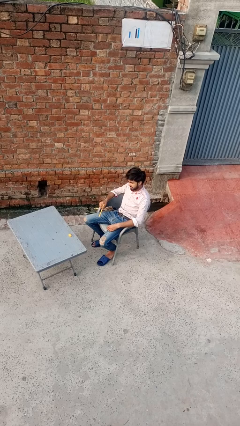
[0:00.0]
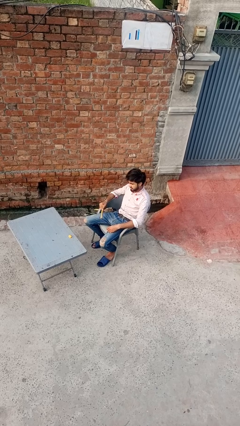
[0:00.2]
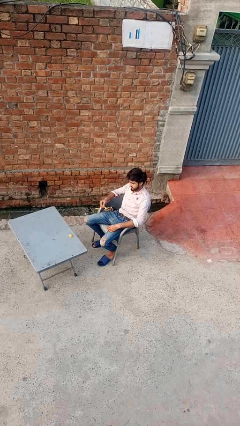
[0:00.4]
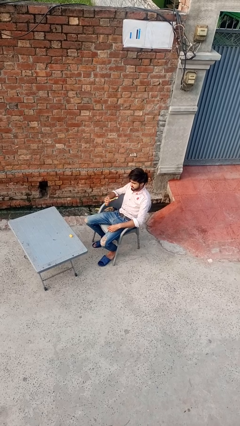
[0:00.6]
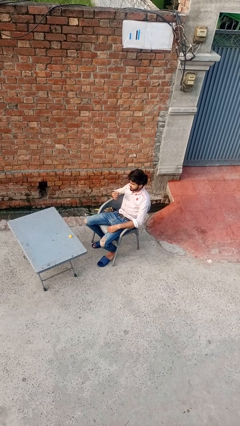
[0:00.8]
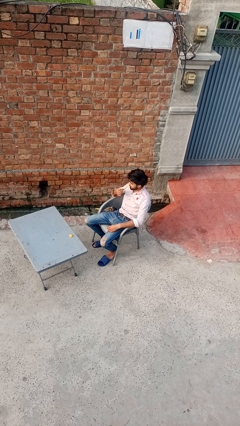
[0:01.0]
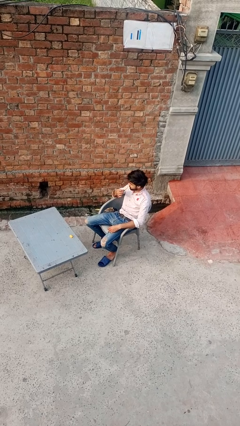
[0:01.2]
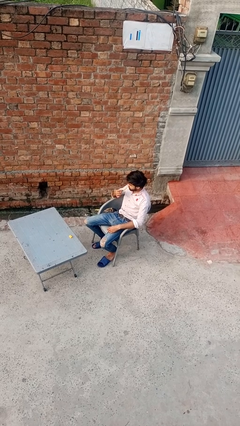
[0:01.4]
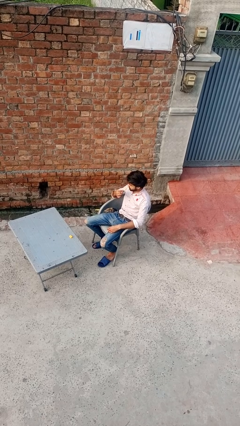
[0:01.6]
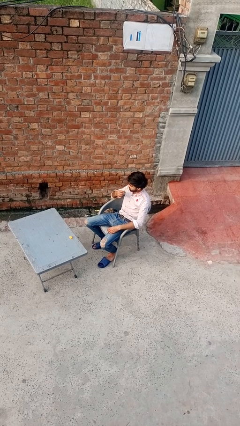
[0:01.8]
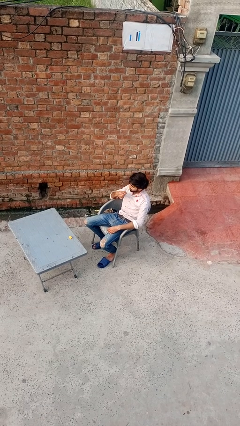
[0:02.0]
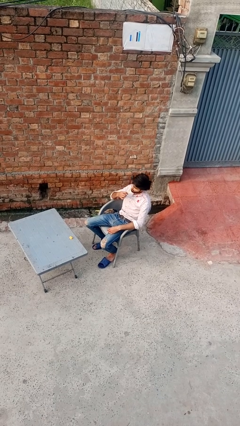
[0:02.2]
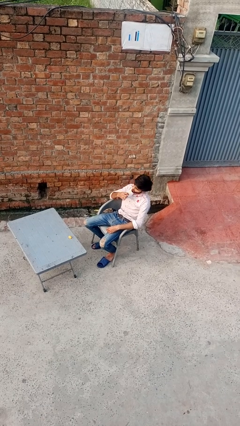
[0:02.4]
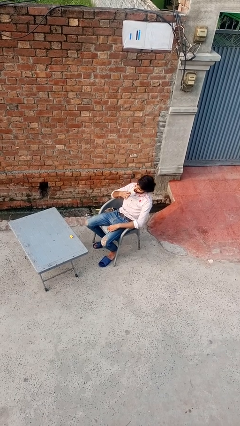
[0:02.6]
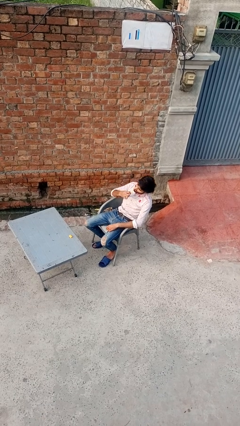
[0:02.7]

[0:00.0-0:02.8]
person brushes teeth

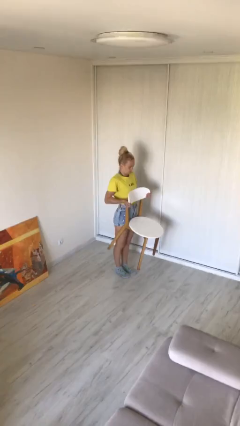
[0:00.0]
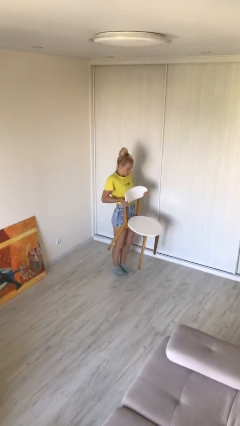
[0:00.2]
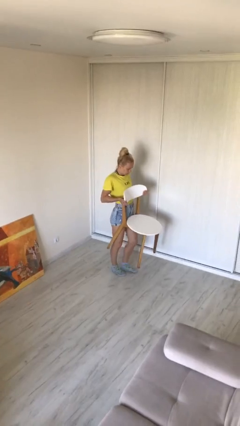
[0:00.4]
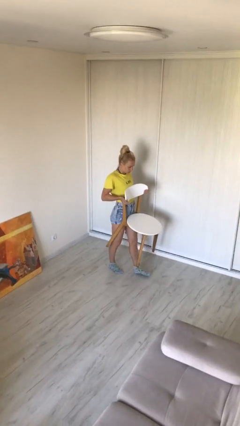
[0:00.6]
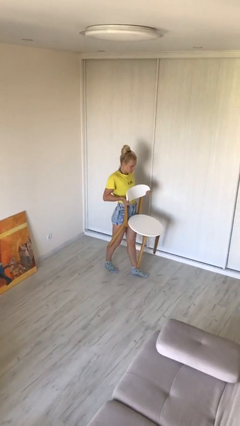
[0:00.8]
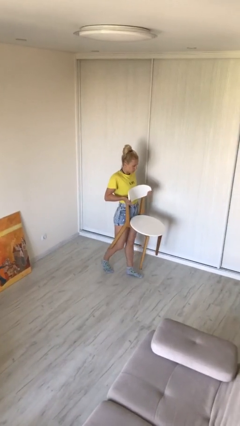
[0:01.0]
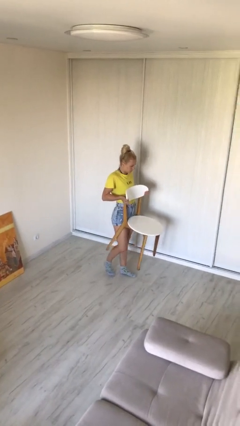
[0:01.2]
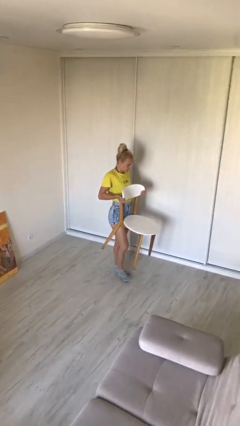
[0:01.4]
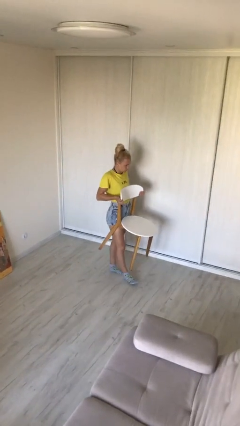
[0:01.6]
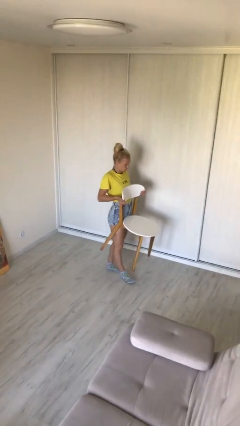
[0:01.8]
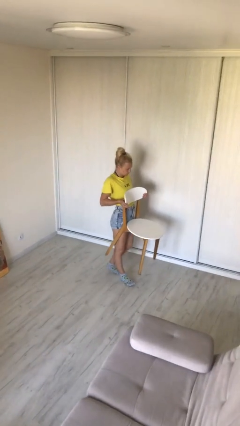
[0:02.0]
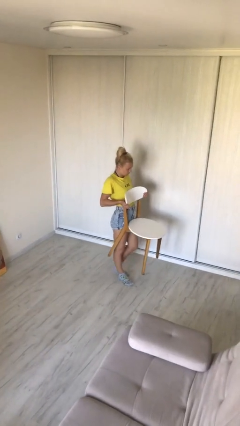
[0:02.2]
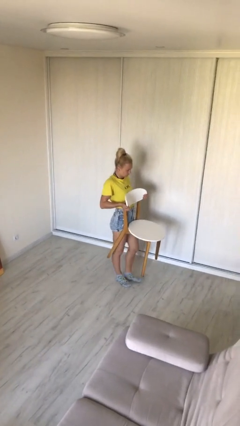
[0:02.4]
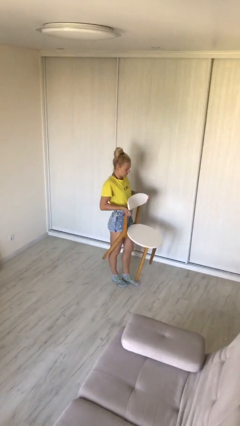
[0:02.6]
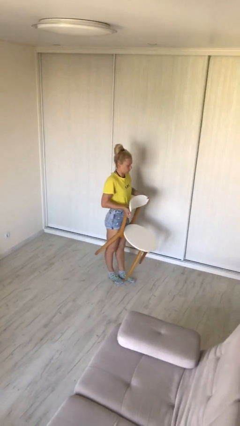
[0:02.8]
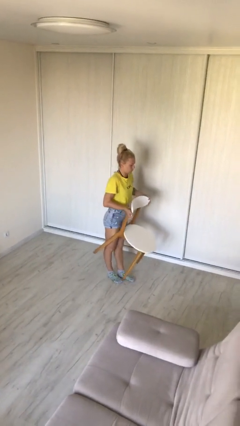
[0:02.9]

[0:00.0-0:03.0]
person carries heavy object

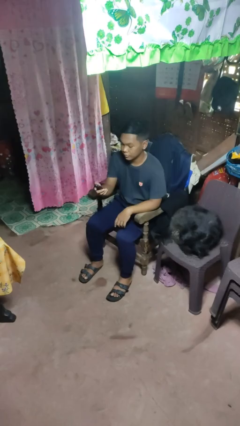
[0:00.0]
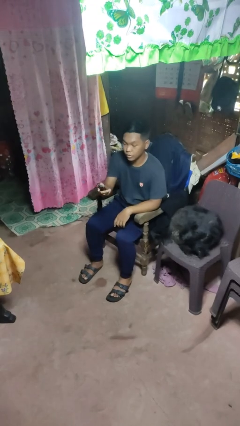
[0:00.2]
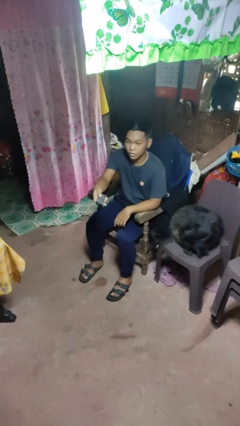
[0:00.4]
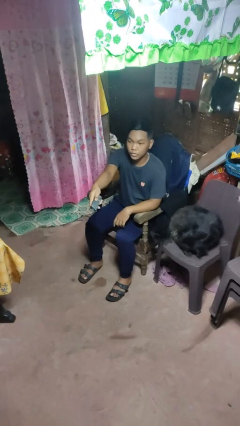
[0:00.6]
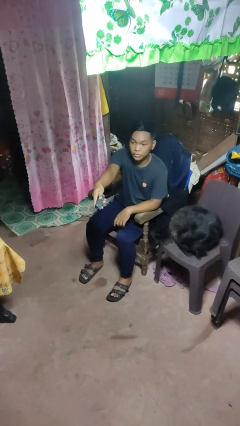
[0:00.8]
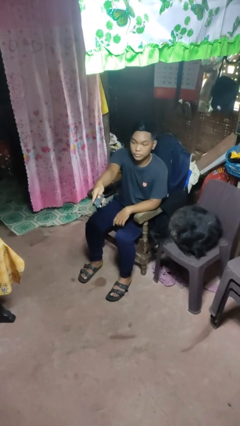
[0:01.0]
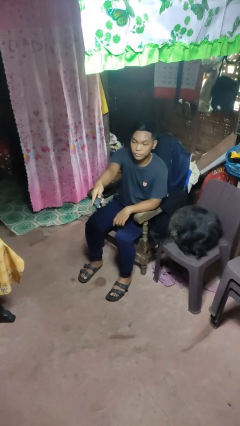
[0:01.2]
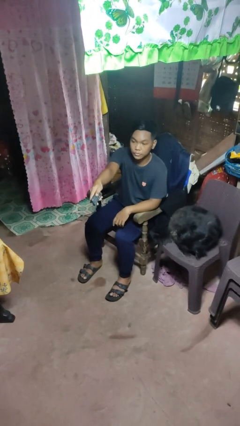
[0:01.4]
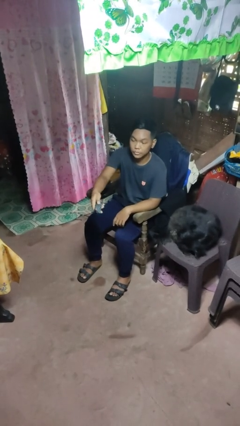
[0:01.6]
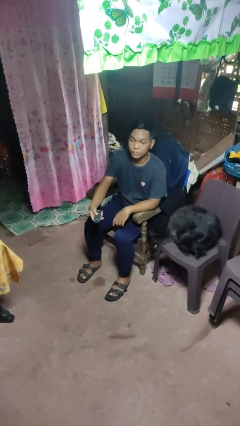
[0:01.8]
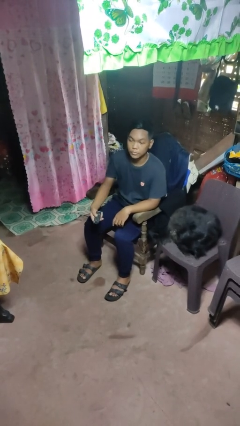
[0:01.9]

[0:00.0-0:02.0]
person uses television remote

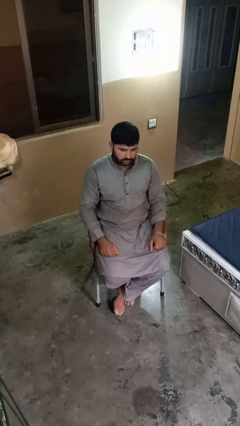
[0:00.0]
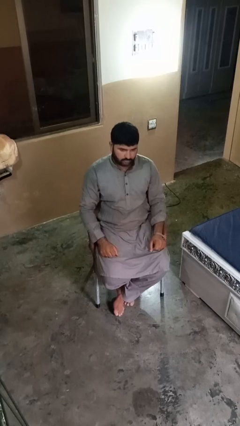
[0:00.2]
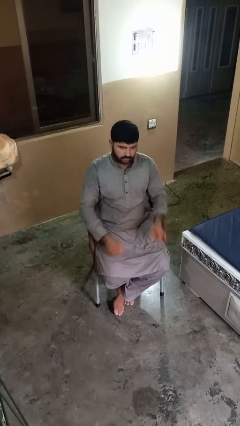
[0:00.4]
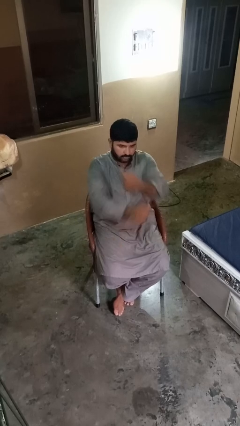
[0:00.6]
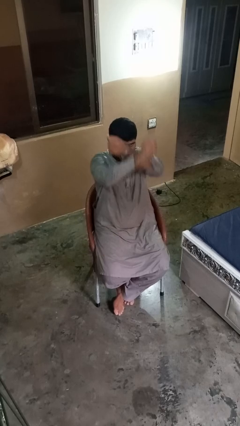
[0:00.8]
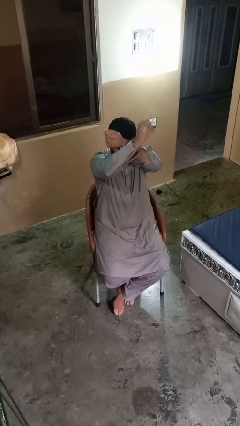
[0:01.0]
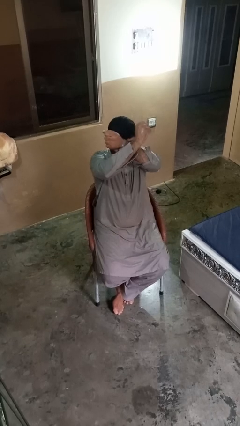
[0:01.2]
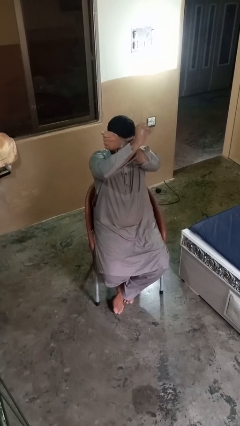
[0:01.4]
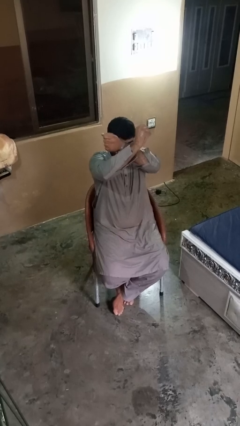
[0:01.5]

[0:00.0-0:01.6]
person gestures arms x

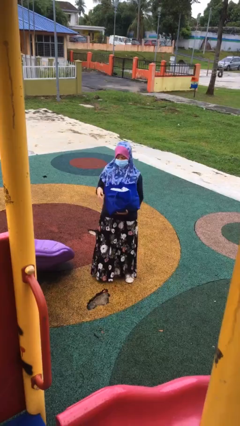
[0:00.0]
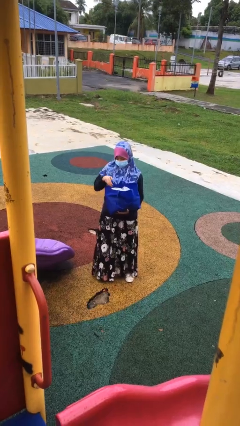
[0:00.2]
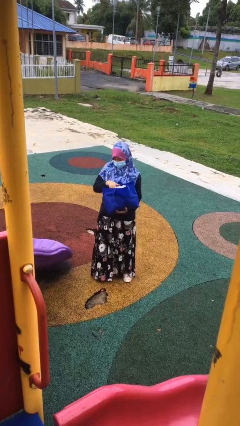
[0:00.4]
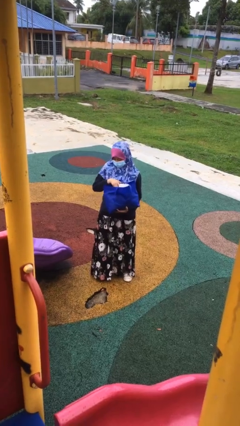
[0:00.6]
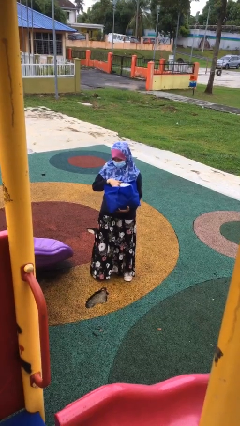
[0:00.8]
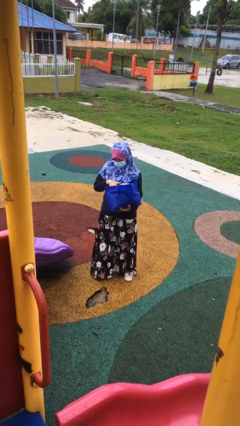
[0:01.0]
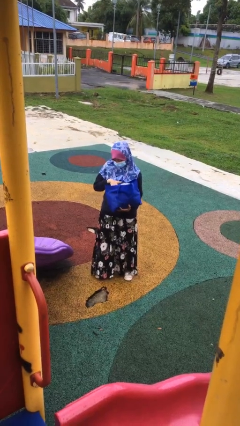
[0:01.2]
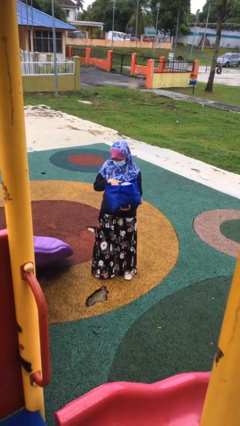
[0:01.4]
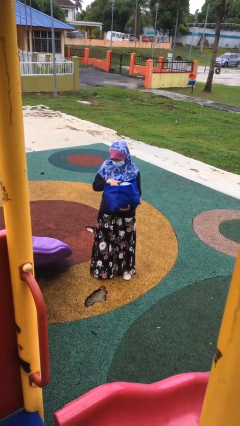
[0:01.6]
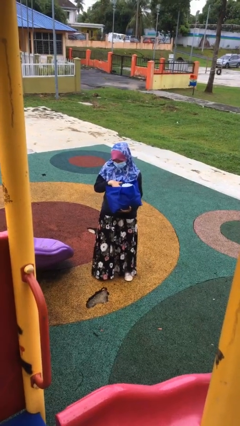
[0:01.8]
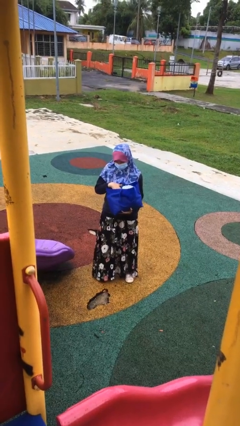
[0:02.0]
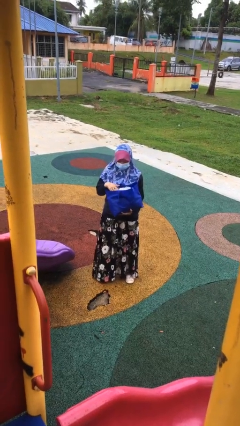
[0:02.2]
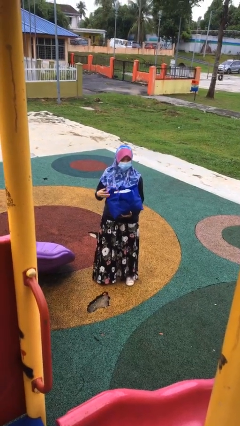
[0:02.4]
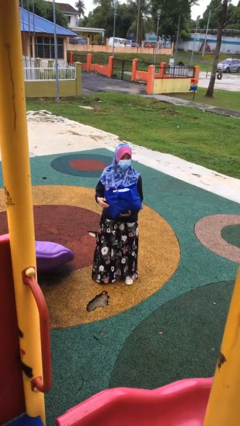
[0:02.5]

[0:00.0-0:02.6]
person searches in bag

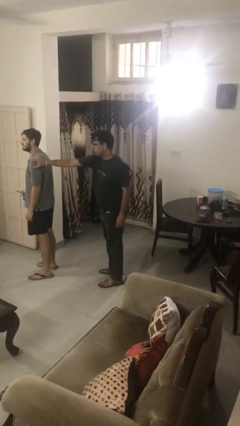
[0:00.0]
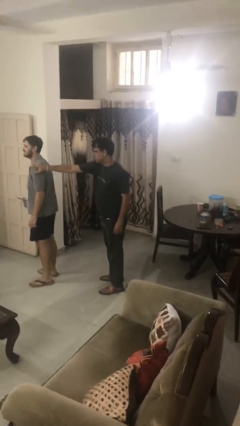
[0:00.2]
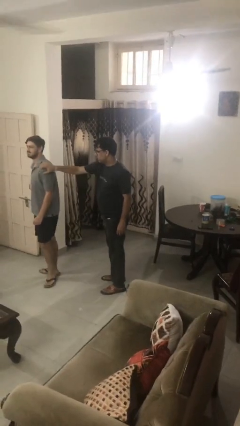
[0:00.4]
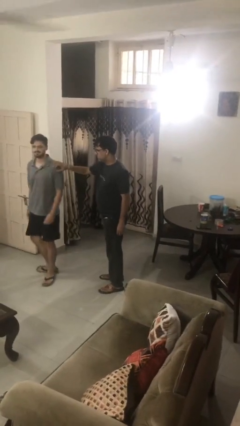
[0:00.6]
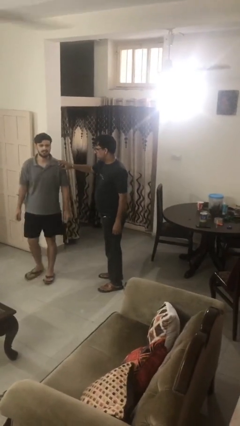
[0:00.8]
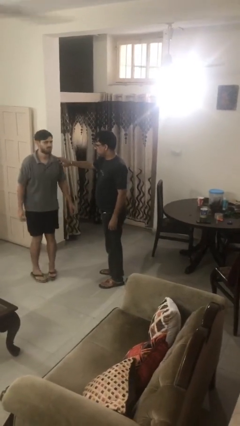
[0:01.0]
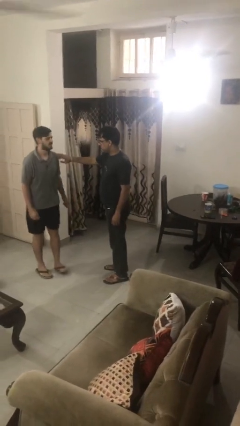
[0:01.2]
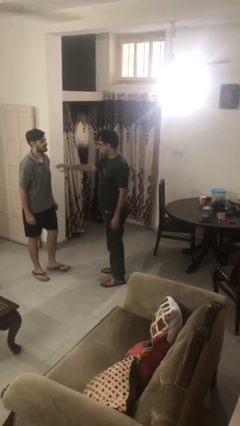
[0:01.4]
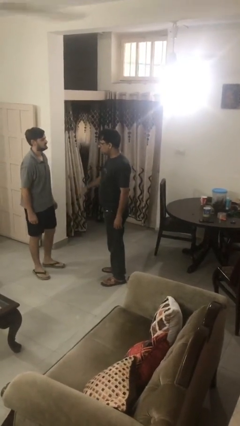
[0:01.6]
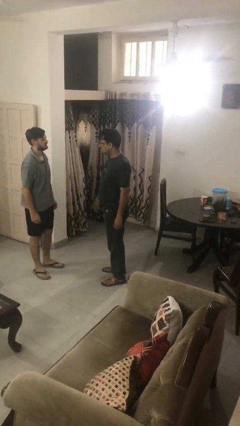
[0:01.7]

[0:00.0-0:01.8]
person spins person around

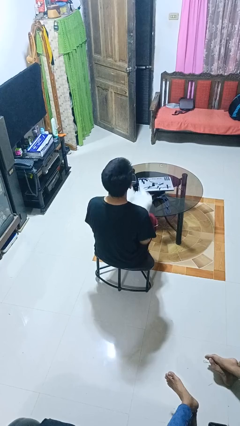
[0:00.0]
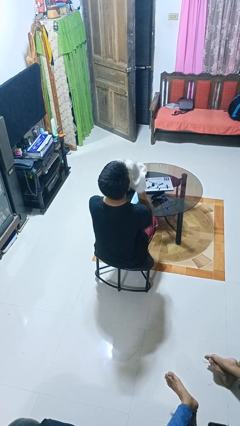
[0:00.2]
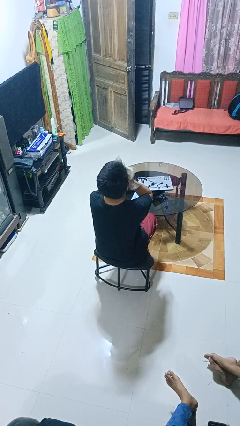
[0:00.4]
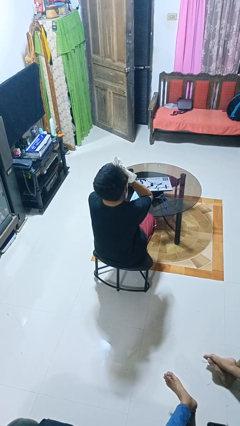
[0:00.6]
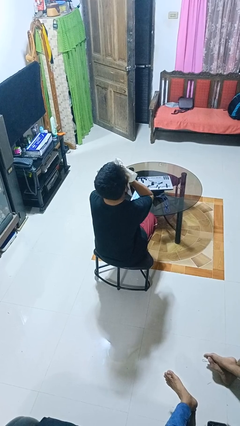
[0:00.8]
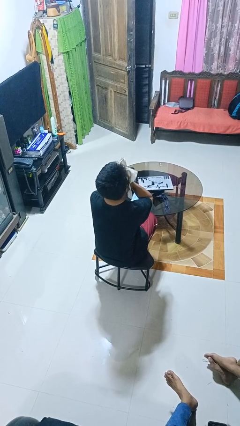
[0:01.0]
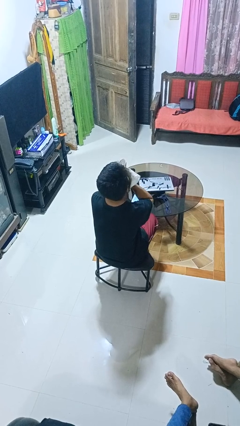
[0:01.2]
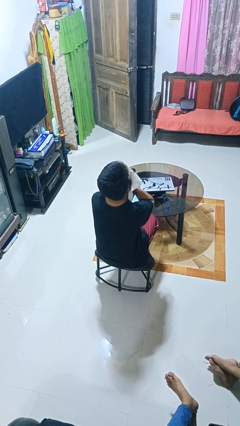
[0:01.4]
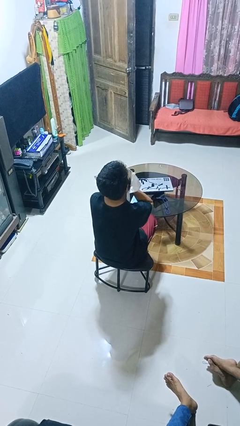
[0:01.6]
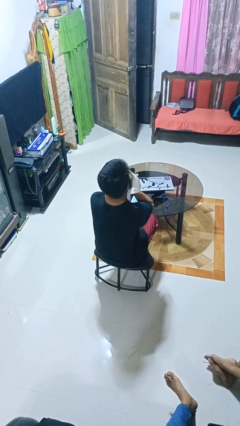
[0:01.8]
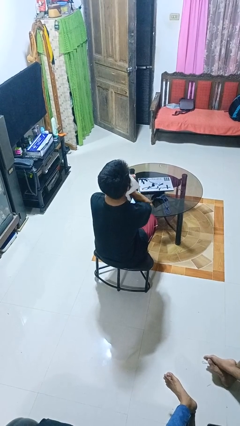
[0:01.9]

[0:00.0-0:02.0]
person wipes mouth with napkin

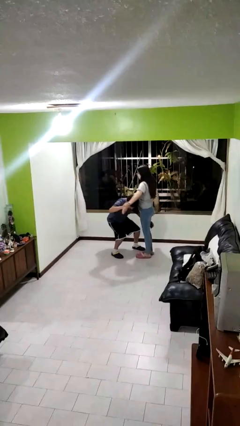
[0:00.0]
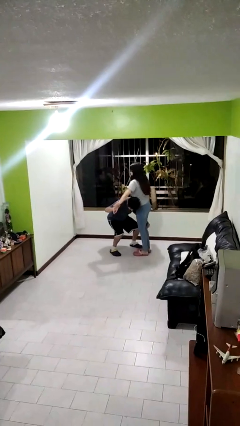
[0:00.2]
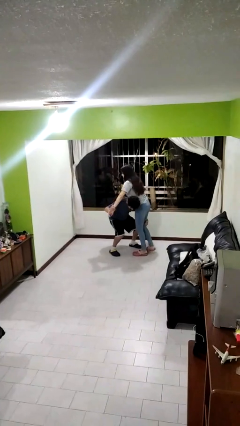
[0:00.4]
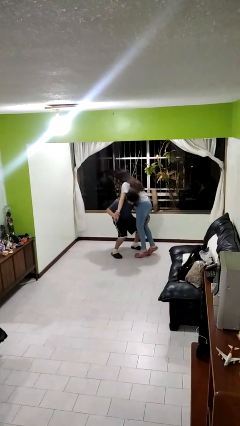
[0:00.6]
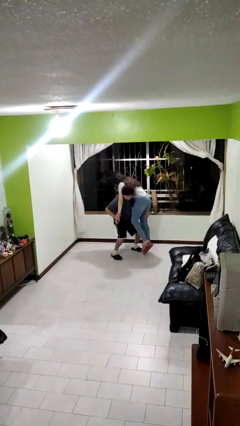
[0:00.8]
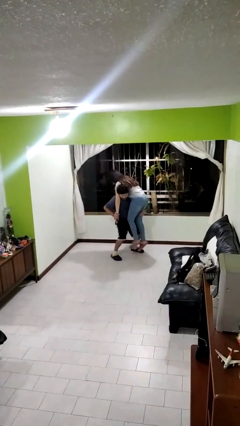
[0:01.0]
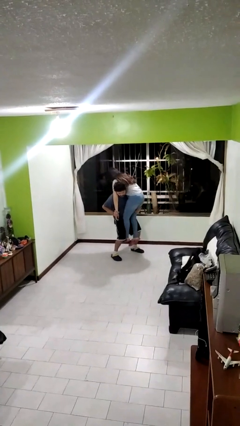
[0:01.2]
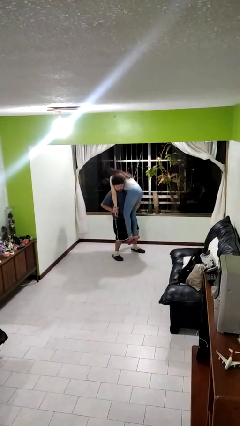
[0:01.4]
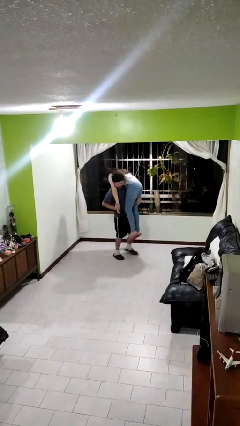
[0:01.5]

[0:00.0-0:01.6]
person carries person over shoulder
